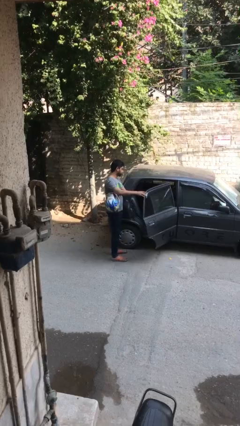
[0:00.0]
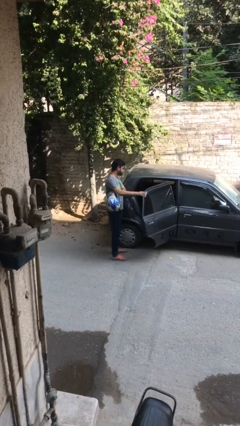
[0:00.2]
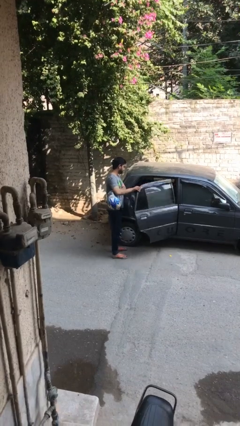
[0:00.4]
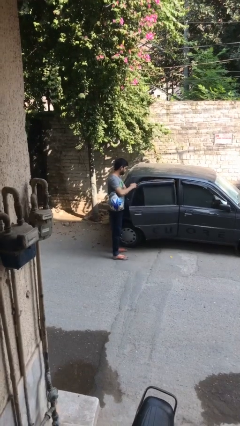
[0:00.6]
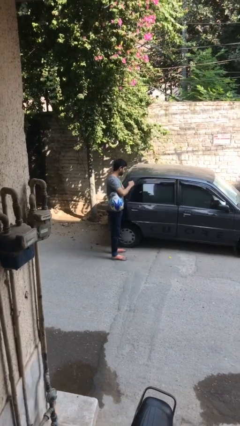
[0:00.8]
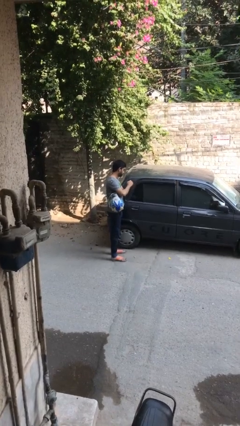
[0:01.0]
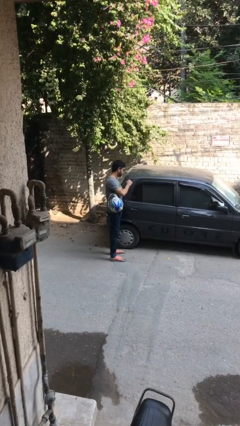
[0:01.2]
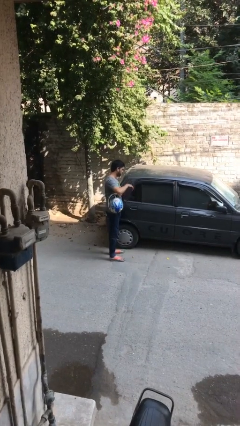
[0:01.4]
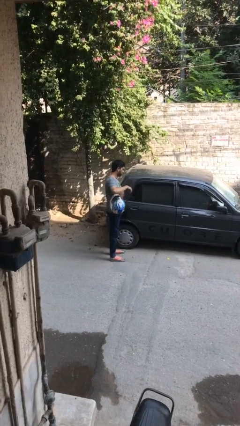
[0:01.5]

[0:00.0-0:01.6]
person closes car door

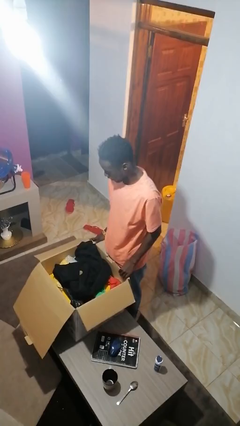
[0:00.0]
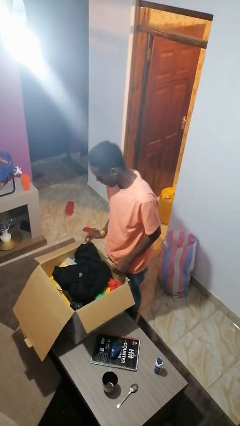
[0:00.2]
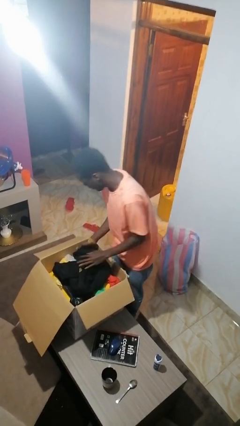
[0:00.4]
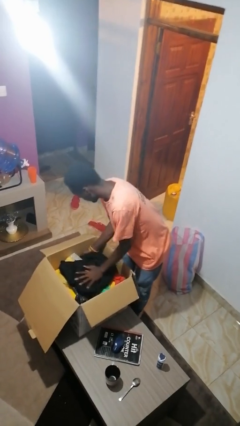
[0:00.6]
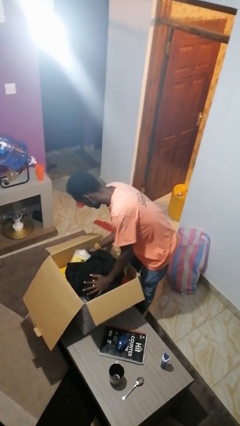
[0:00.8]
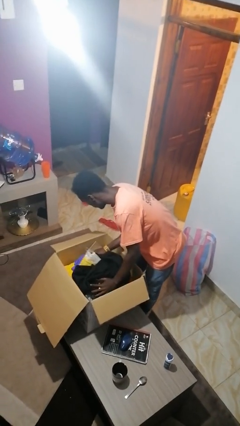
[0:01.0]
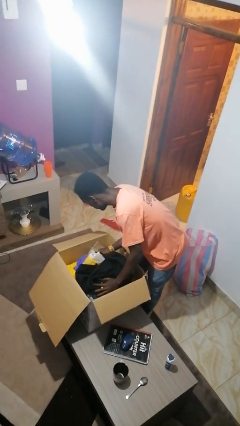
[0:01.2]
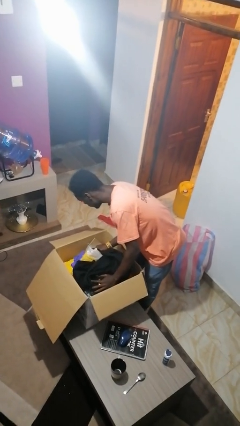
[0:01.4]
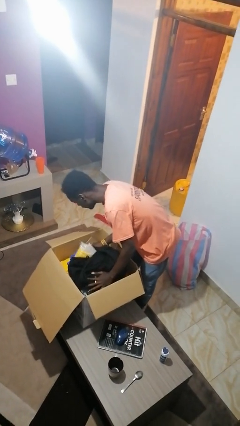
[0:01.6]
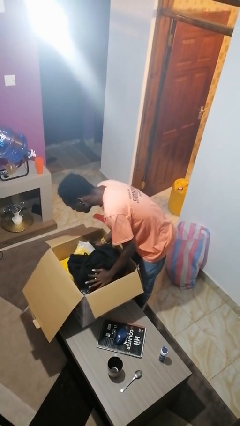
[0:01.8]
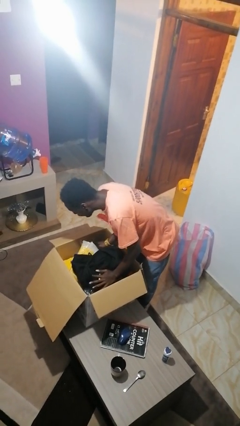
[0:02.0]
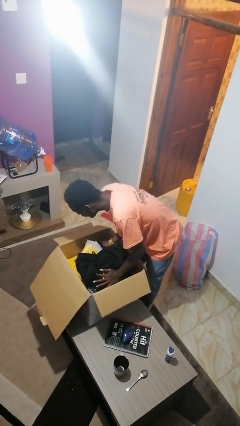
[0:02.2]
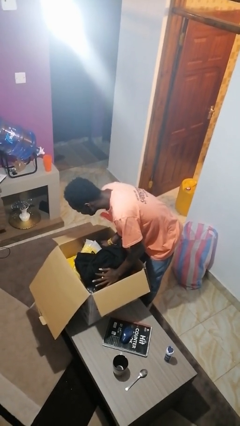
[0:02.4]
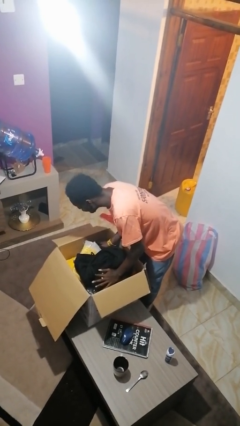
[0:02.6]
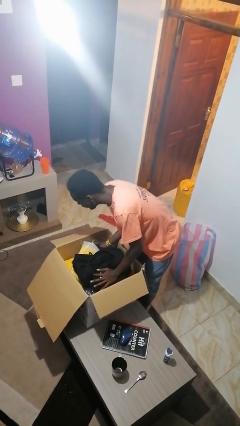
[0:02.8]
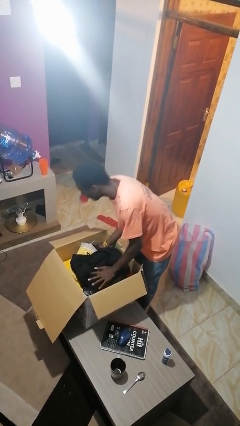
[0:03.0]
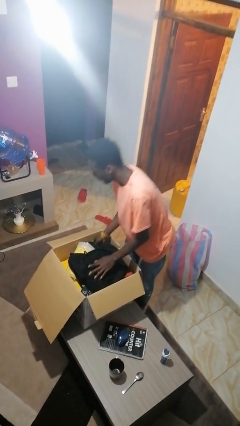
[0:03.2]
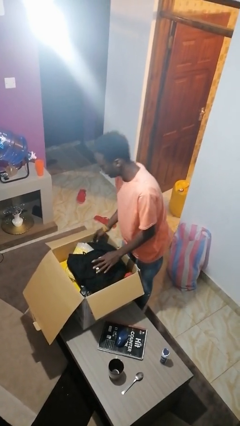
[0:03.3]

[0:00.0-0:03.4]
person searches in box

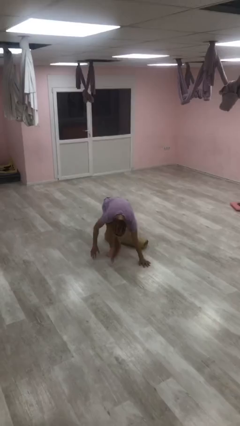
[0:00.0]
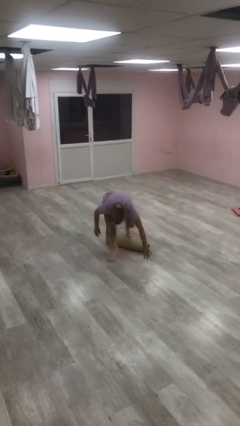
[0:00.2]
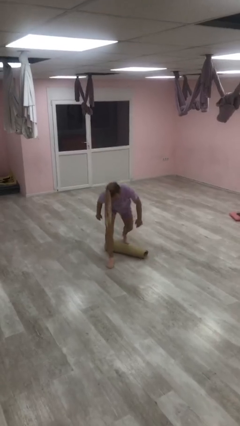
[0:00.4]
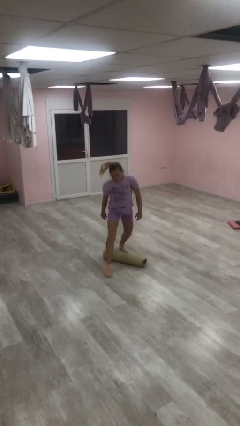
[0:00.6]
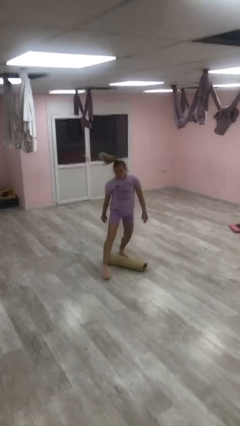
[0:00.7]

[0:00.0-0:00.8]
person stands up from floor

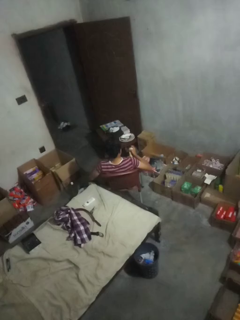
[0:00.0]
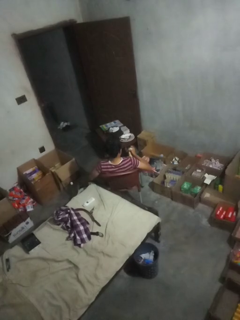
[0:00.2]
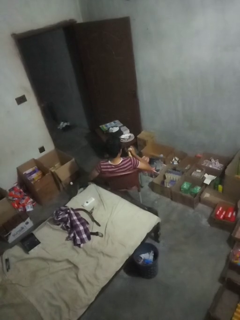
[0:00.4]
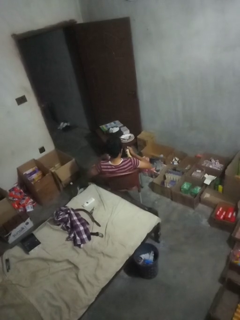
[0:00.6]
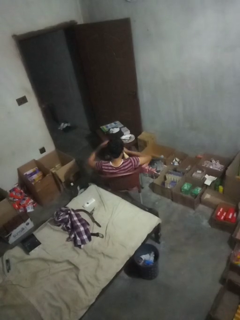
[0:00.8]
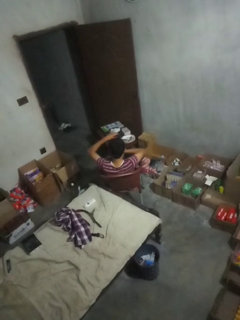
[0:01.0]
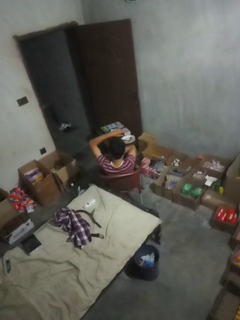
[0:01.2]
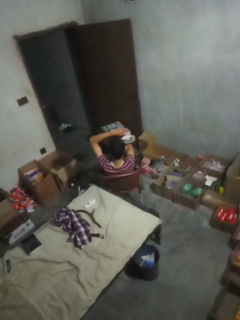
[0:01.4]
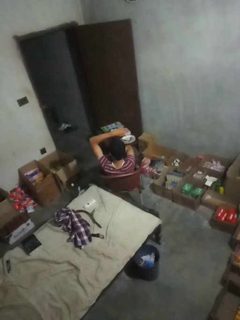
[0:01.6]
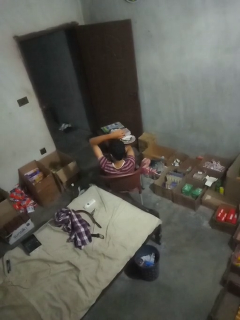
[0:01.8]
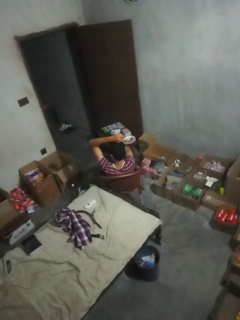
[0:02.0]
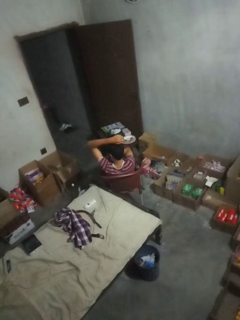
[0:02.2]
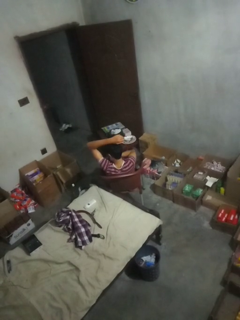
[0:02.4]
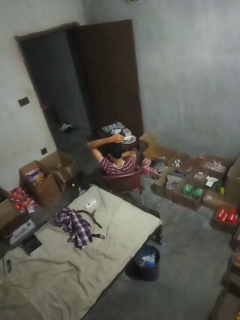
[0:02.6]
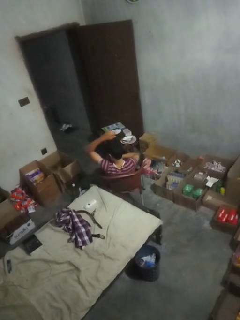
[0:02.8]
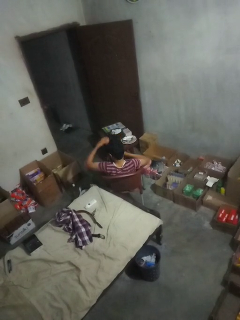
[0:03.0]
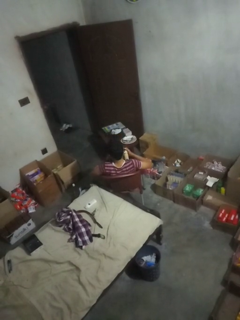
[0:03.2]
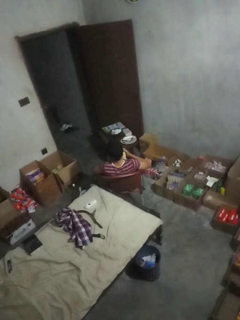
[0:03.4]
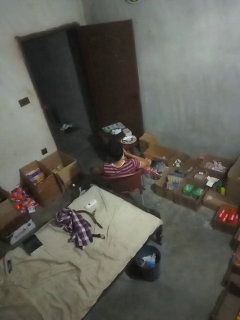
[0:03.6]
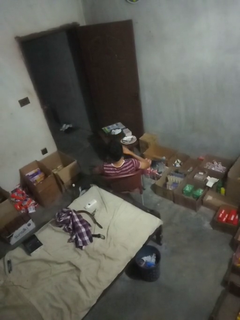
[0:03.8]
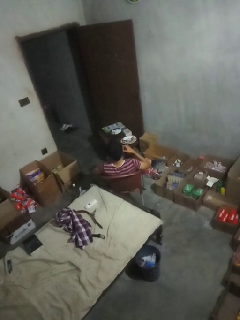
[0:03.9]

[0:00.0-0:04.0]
person applies deodorant

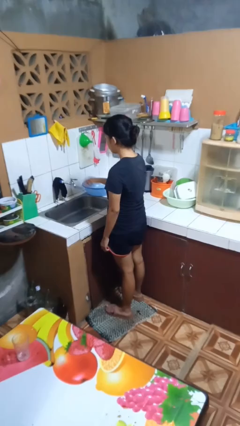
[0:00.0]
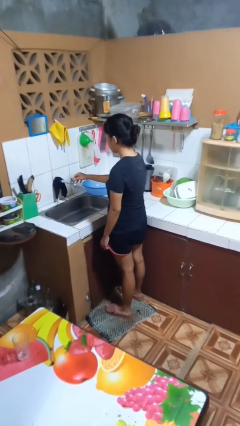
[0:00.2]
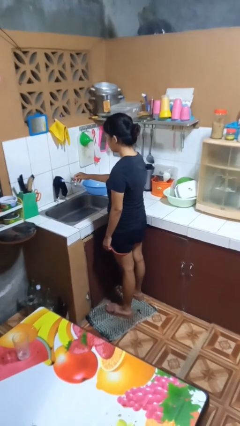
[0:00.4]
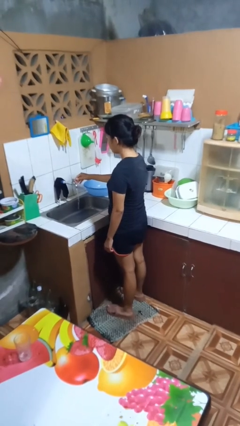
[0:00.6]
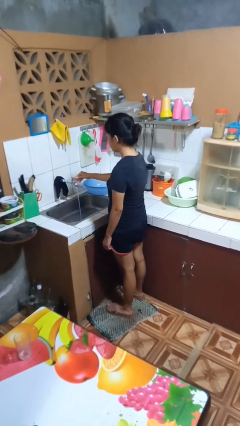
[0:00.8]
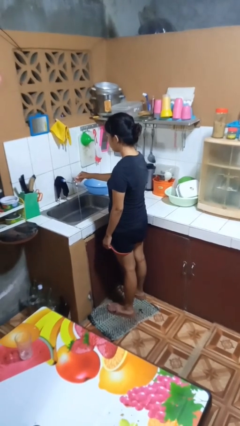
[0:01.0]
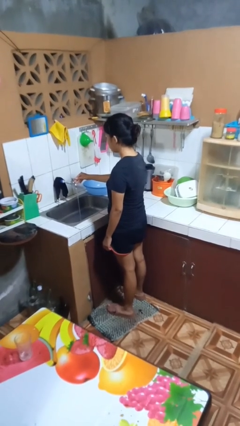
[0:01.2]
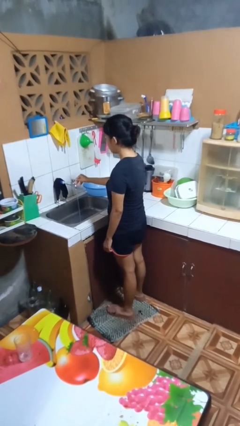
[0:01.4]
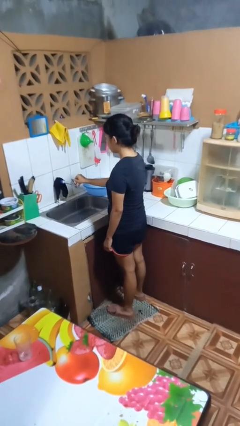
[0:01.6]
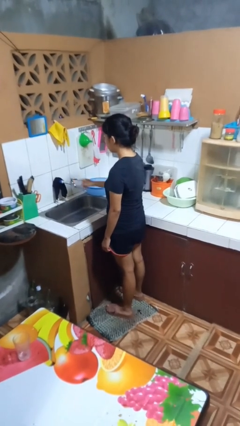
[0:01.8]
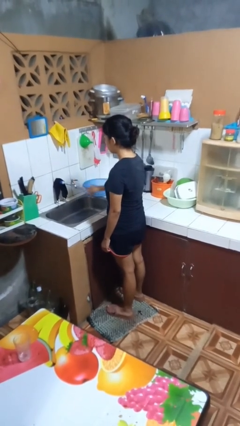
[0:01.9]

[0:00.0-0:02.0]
person turns on faucet

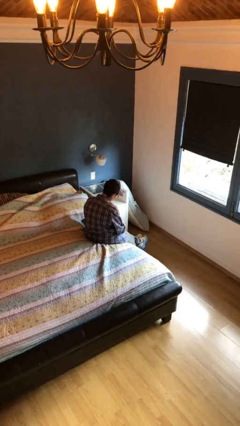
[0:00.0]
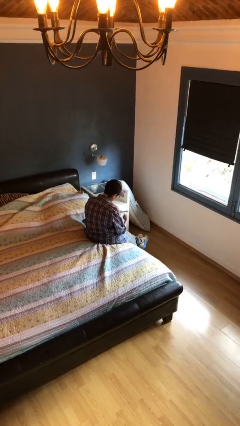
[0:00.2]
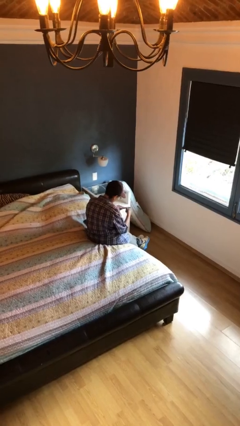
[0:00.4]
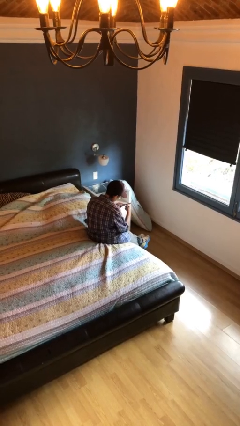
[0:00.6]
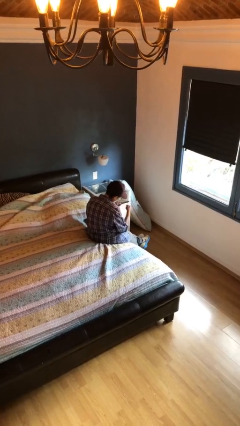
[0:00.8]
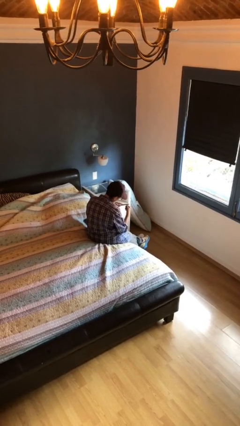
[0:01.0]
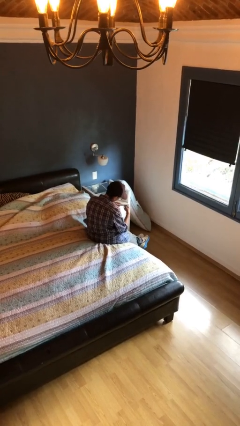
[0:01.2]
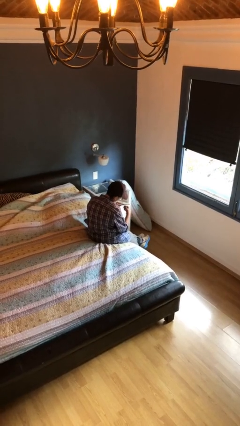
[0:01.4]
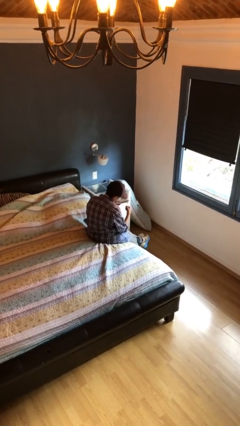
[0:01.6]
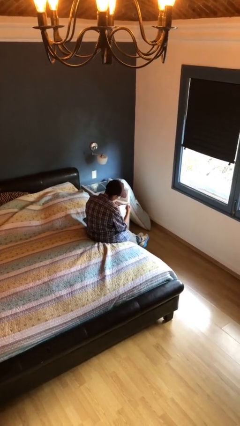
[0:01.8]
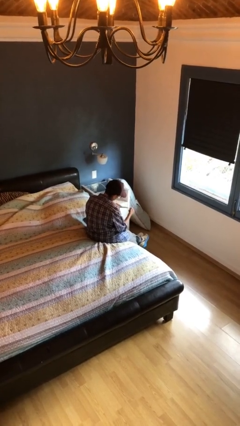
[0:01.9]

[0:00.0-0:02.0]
person files fingernails

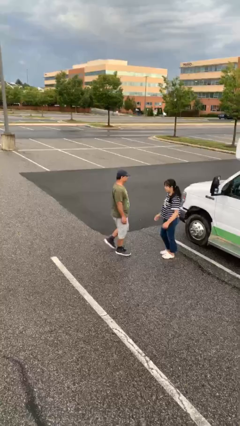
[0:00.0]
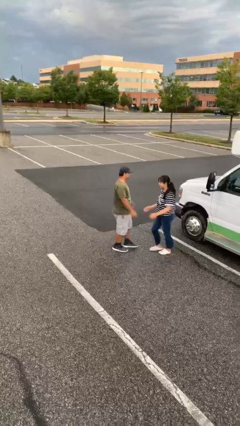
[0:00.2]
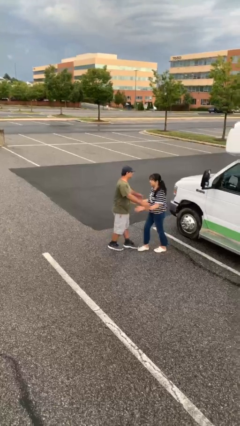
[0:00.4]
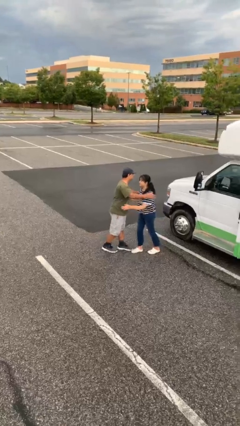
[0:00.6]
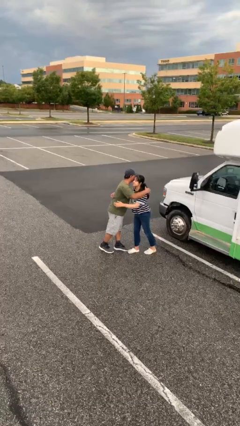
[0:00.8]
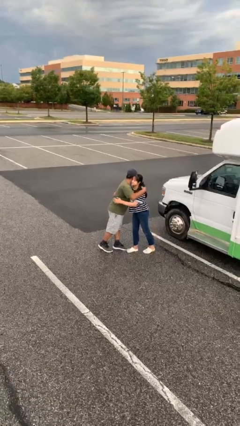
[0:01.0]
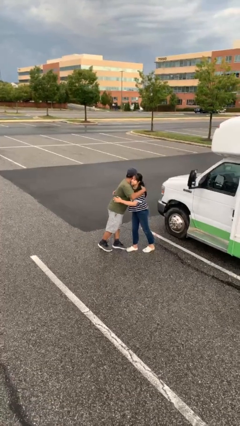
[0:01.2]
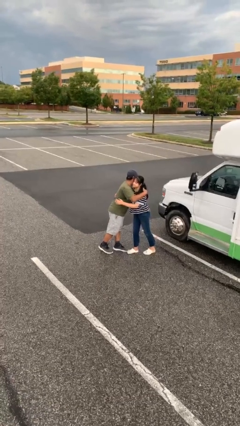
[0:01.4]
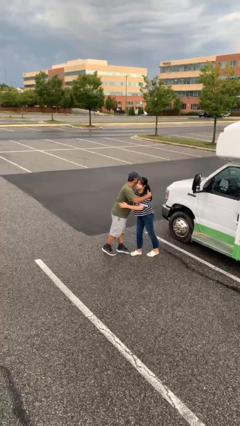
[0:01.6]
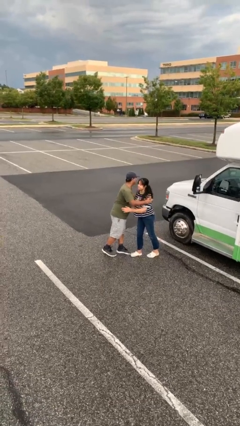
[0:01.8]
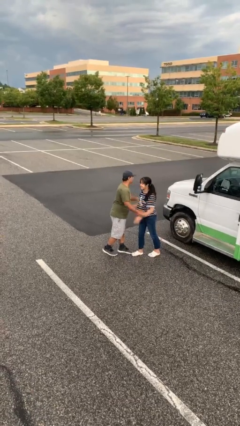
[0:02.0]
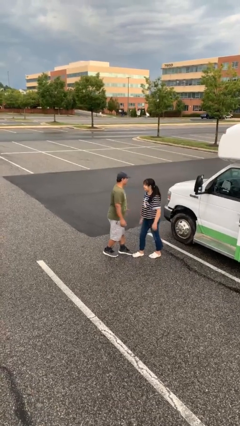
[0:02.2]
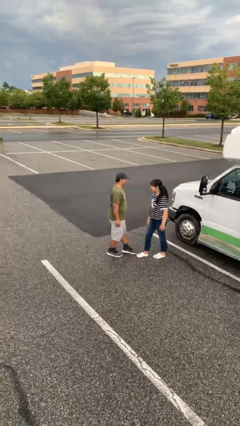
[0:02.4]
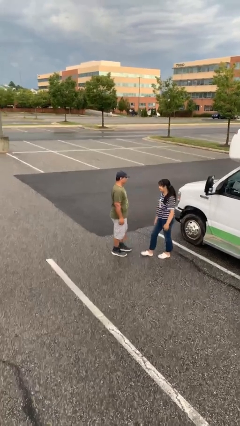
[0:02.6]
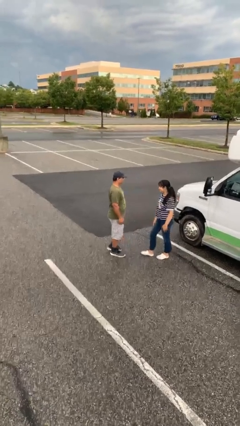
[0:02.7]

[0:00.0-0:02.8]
person embraces person

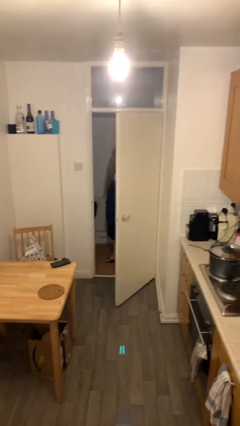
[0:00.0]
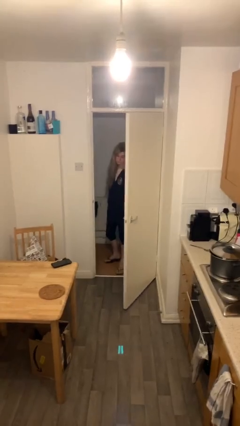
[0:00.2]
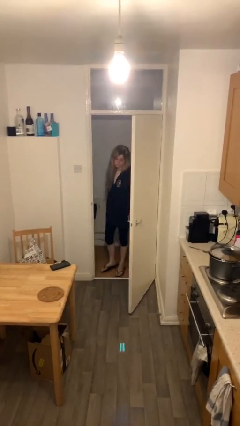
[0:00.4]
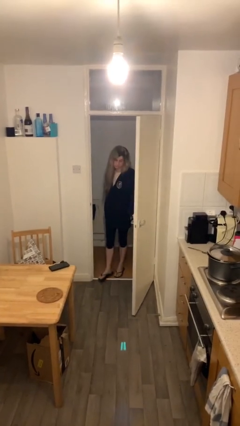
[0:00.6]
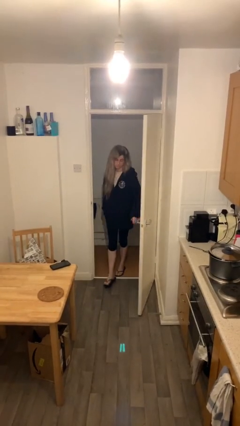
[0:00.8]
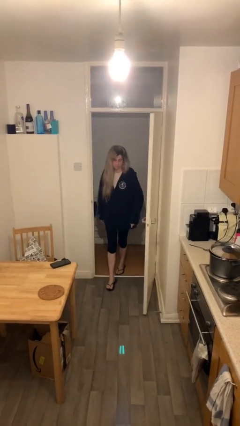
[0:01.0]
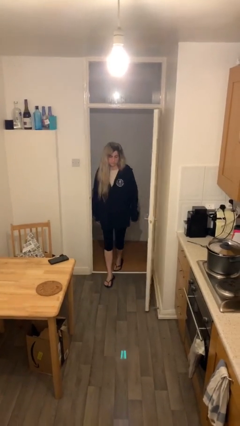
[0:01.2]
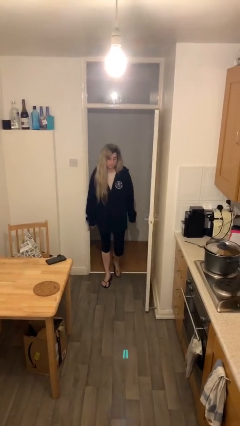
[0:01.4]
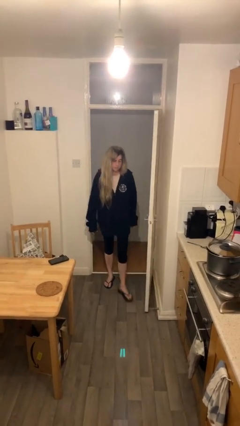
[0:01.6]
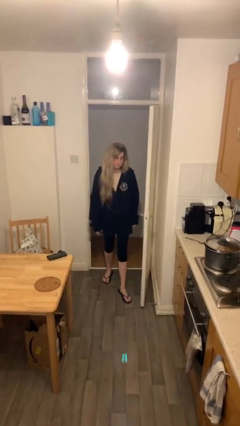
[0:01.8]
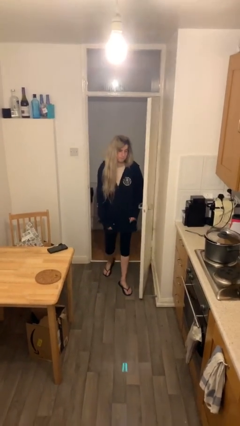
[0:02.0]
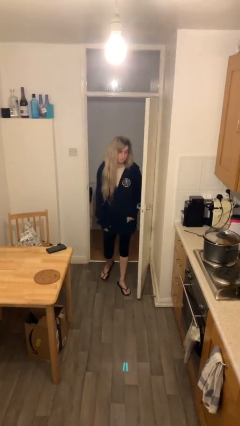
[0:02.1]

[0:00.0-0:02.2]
person enters scene through structure
